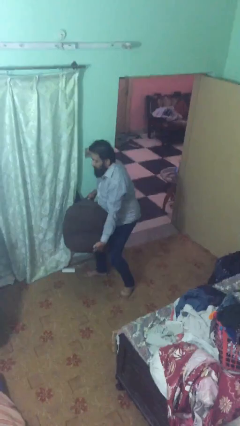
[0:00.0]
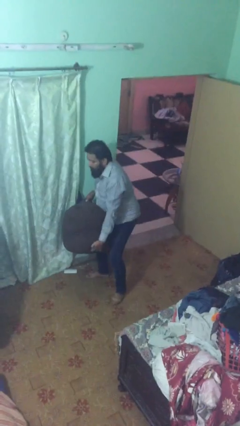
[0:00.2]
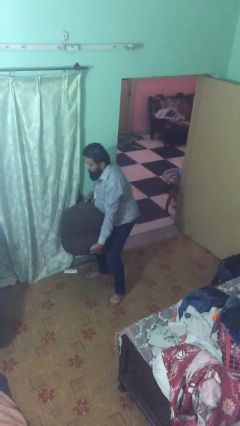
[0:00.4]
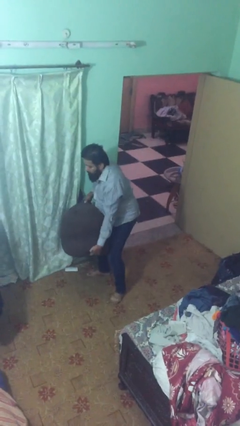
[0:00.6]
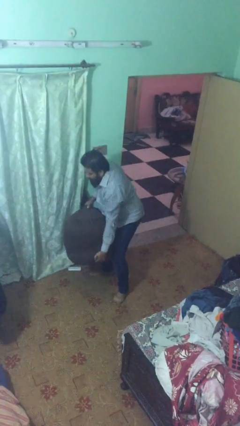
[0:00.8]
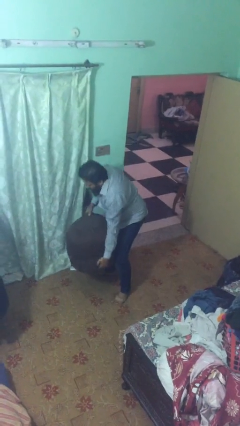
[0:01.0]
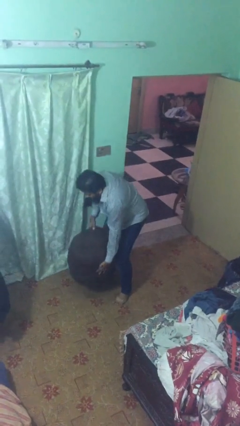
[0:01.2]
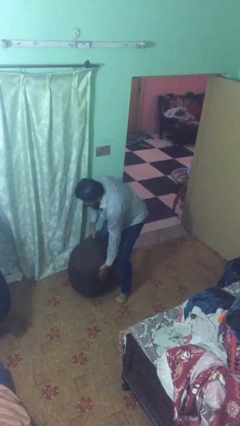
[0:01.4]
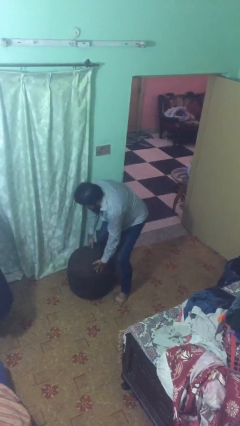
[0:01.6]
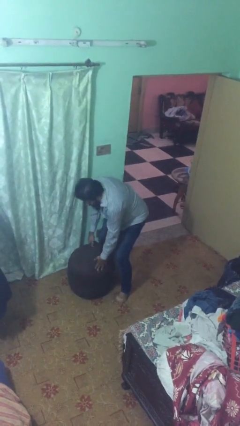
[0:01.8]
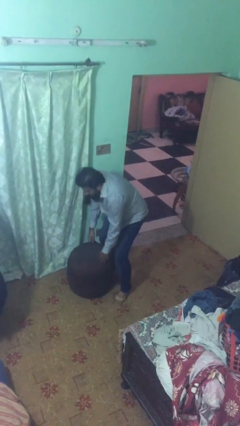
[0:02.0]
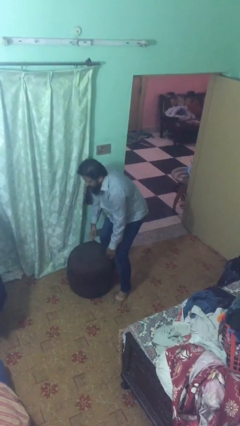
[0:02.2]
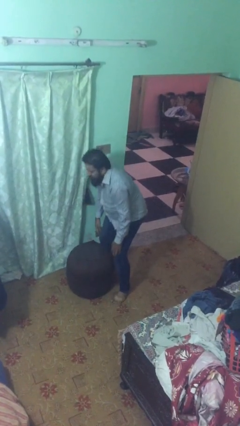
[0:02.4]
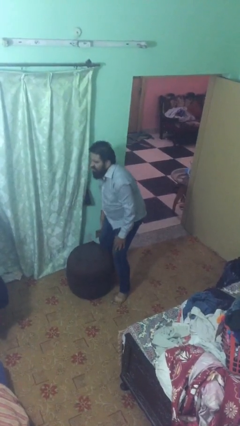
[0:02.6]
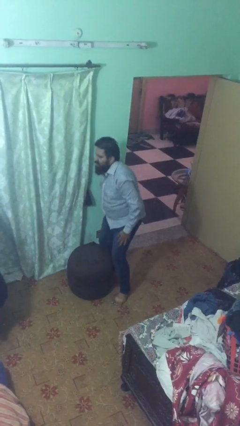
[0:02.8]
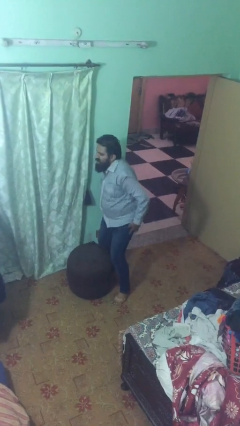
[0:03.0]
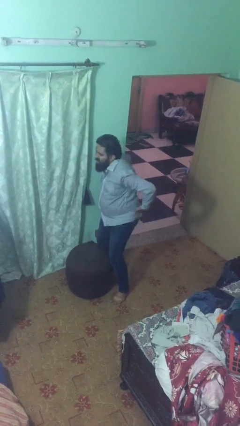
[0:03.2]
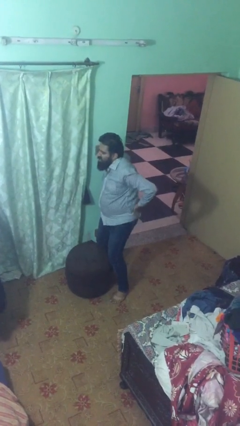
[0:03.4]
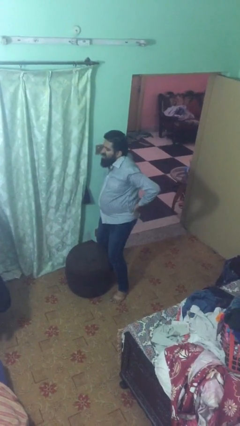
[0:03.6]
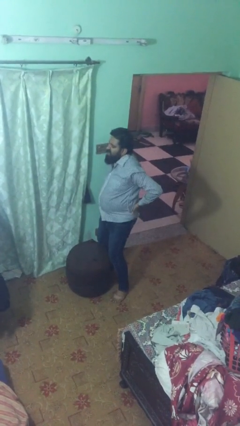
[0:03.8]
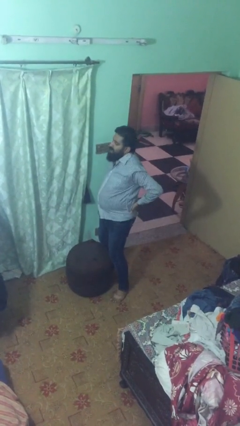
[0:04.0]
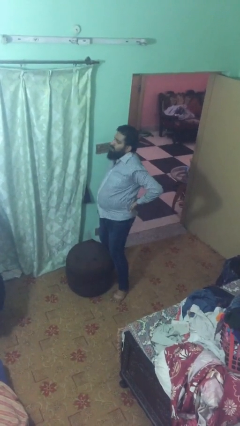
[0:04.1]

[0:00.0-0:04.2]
person puts down object on floor

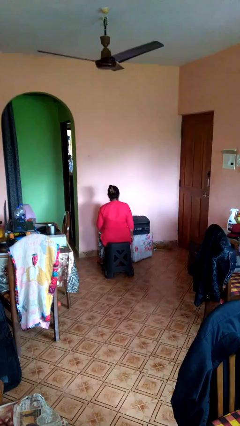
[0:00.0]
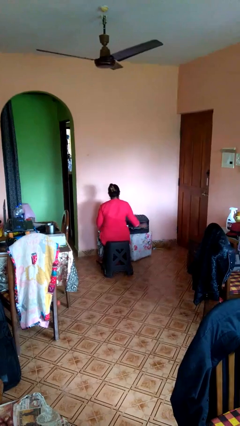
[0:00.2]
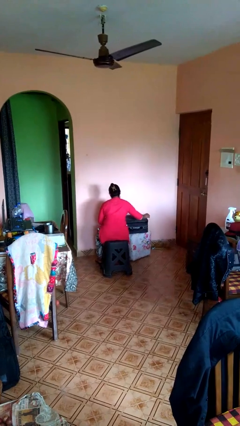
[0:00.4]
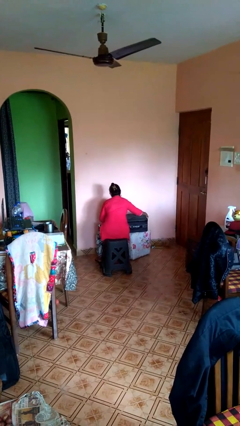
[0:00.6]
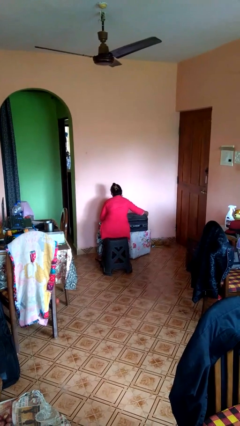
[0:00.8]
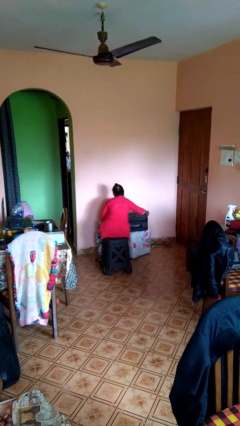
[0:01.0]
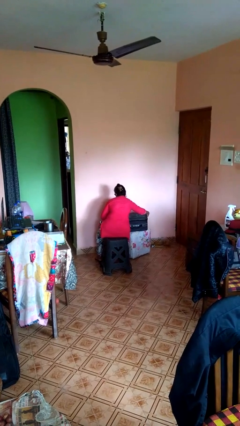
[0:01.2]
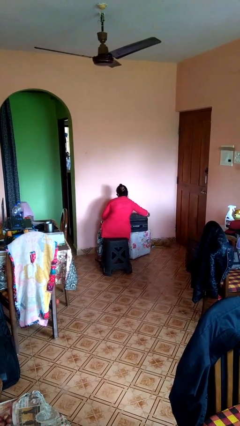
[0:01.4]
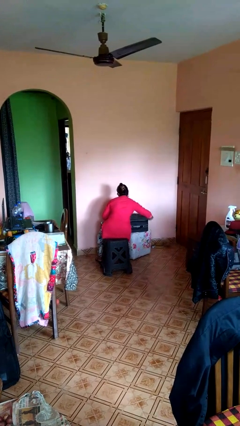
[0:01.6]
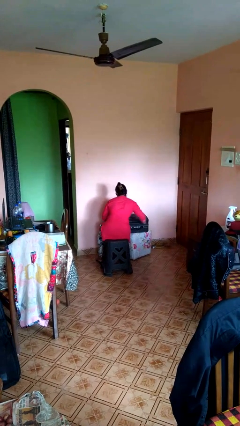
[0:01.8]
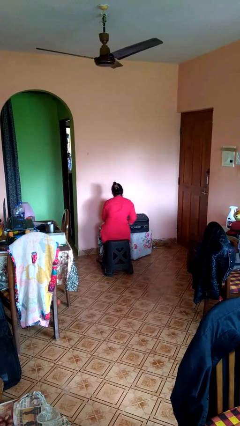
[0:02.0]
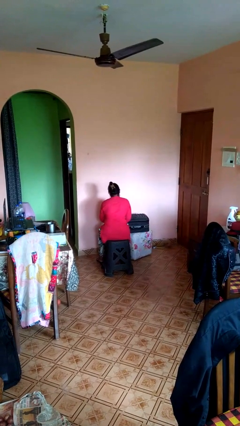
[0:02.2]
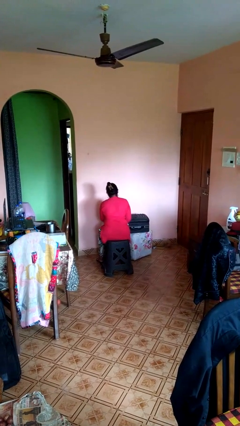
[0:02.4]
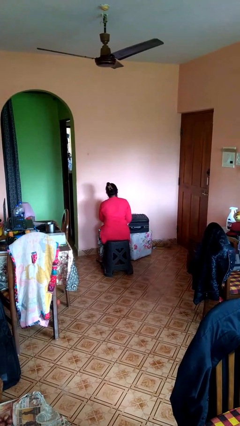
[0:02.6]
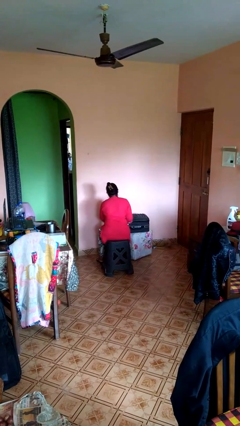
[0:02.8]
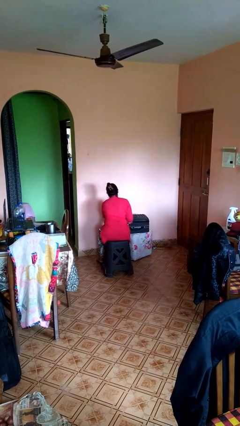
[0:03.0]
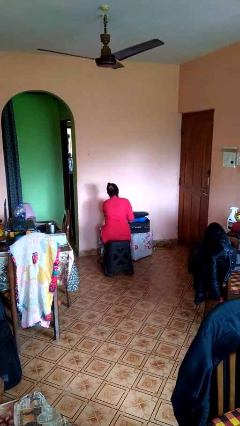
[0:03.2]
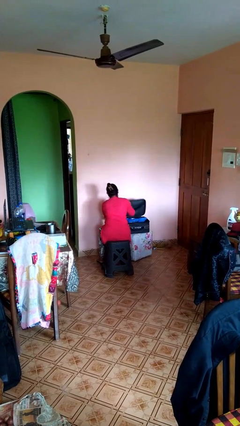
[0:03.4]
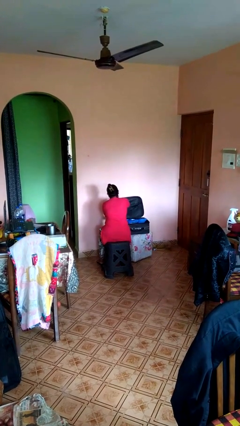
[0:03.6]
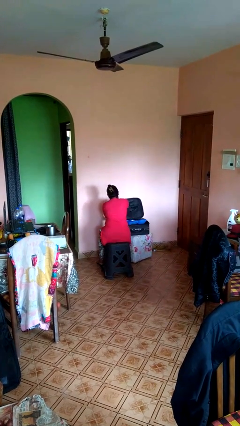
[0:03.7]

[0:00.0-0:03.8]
person opens suitcase

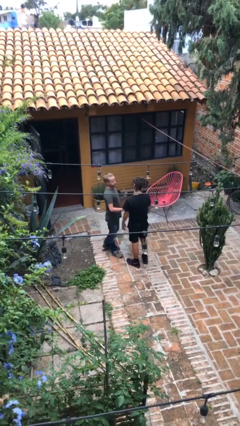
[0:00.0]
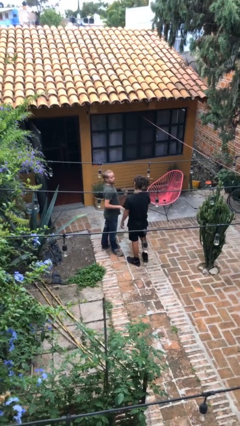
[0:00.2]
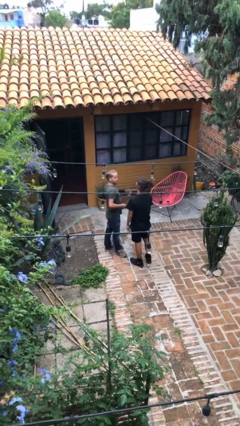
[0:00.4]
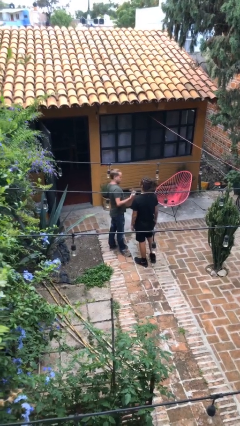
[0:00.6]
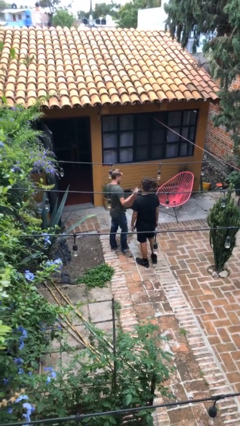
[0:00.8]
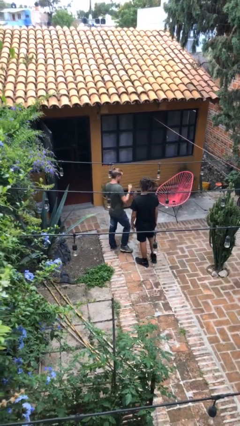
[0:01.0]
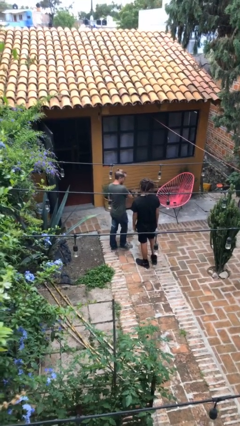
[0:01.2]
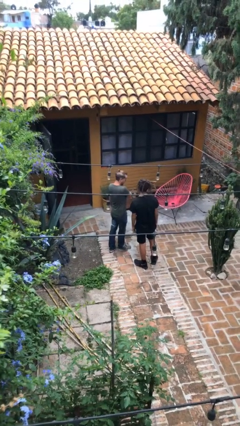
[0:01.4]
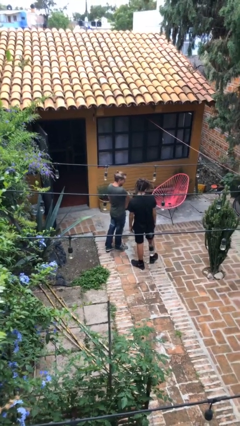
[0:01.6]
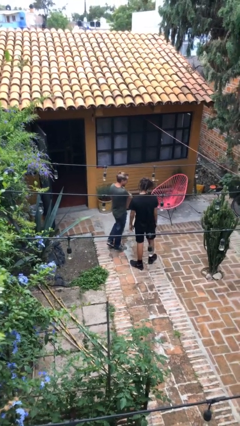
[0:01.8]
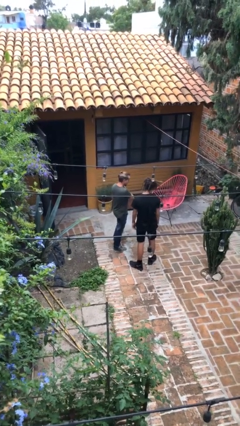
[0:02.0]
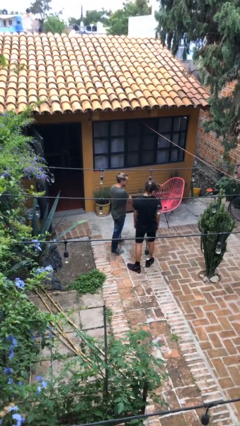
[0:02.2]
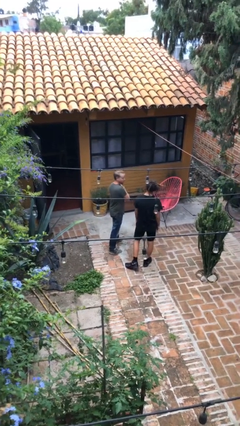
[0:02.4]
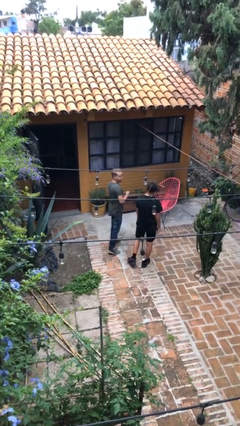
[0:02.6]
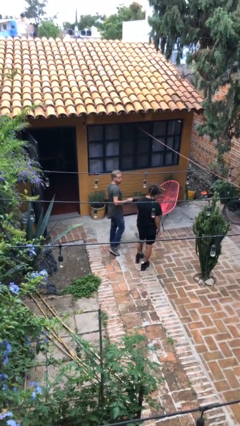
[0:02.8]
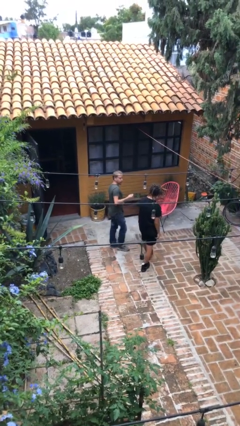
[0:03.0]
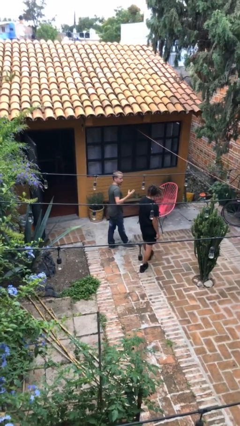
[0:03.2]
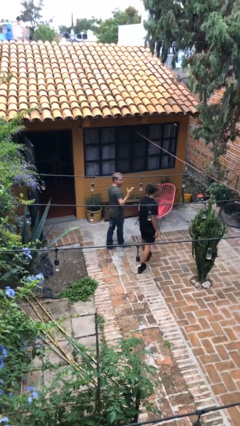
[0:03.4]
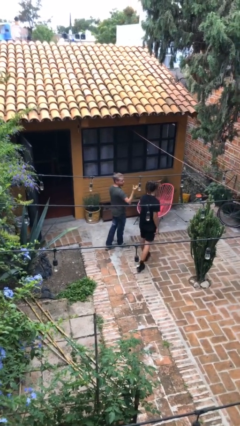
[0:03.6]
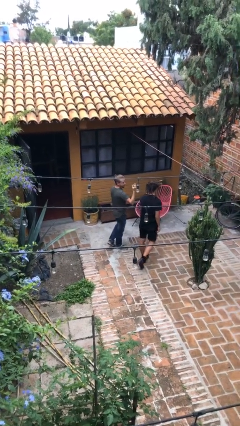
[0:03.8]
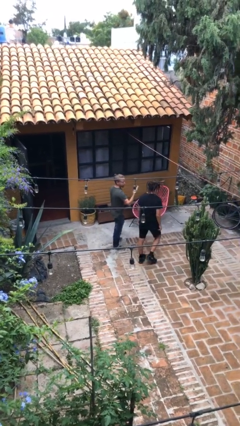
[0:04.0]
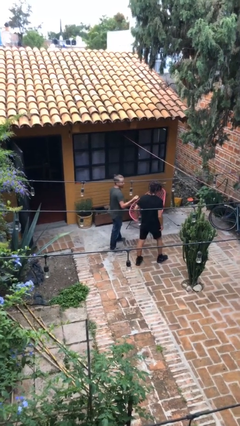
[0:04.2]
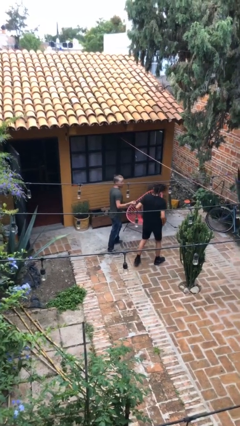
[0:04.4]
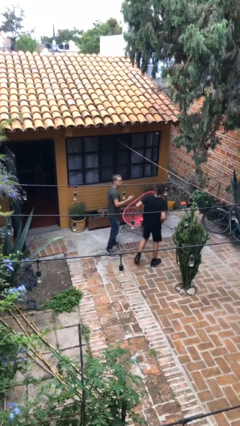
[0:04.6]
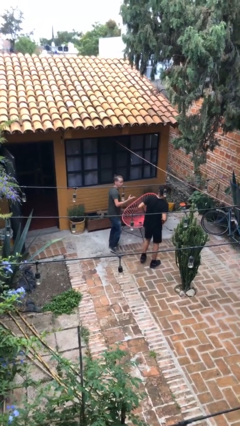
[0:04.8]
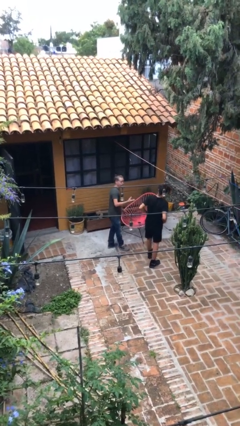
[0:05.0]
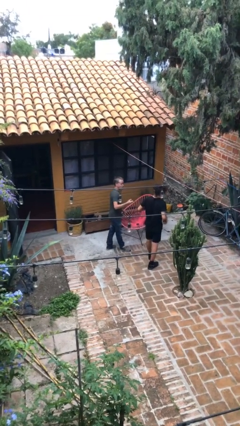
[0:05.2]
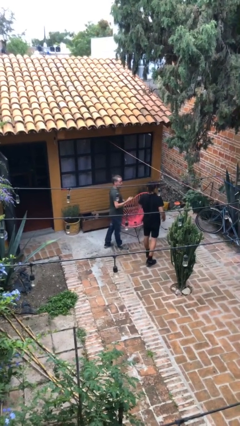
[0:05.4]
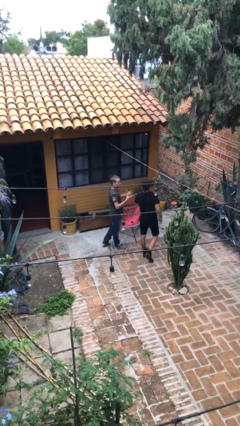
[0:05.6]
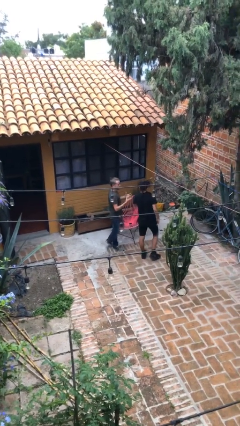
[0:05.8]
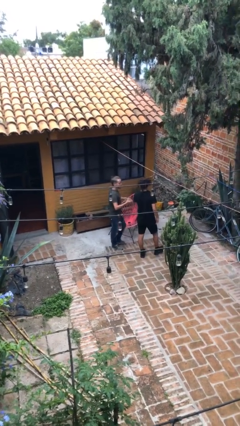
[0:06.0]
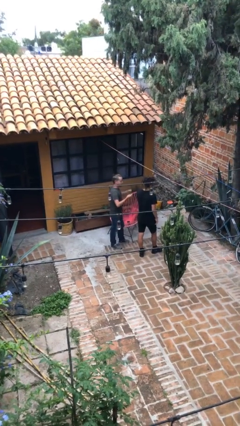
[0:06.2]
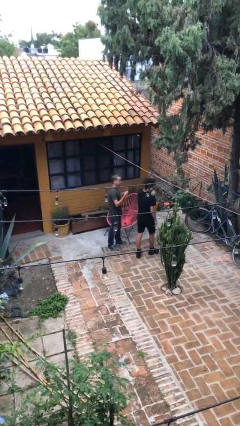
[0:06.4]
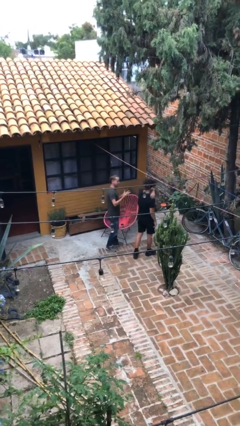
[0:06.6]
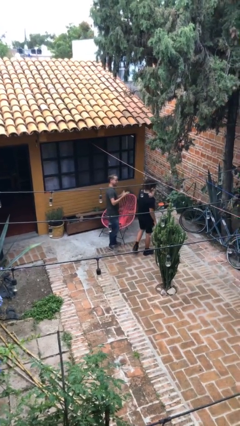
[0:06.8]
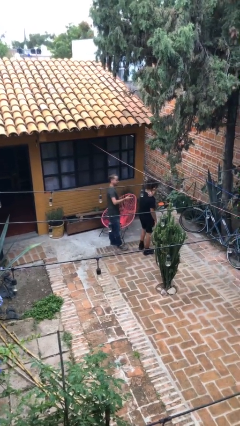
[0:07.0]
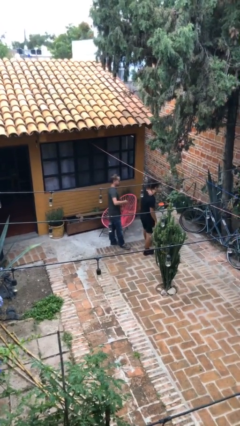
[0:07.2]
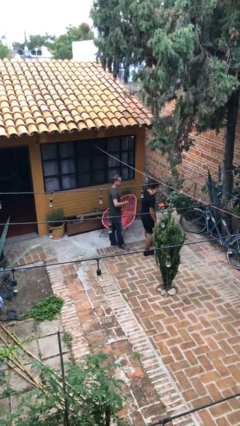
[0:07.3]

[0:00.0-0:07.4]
person talks to person

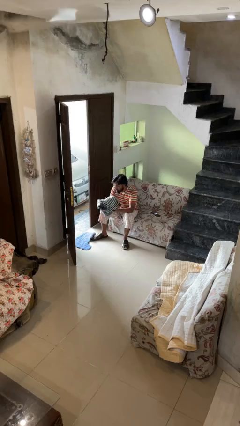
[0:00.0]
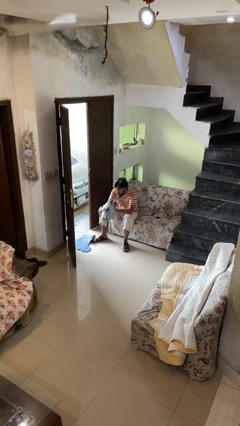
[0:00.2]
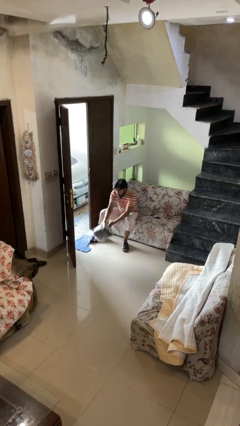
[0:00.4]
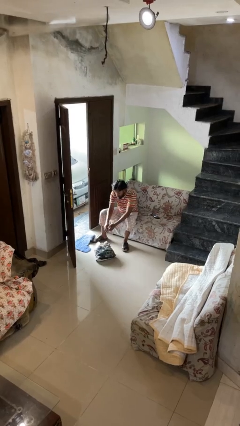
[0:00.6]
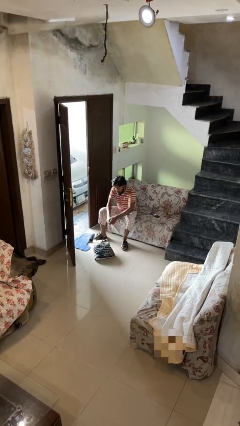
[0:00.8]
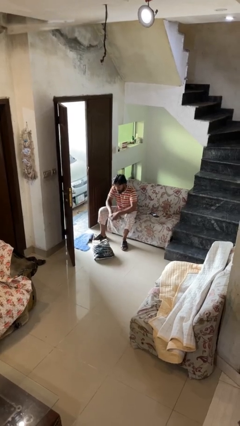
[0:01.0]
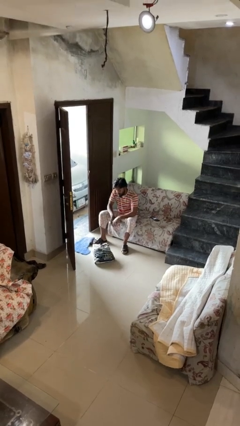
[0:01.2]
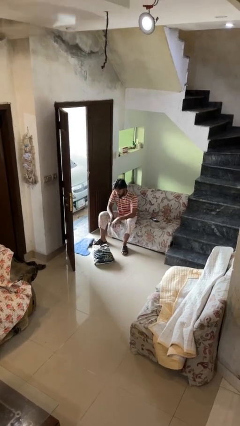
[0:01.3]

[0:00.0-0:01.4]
person drops object

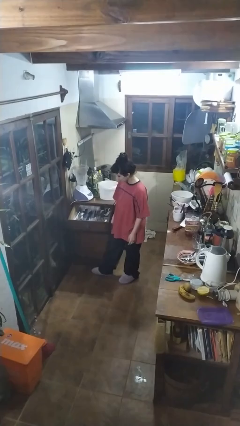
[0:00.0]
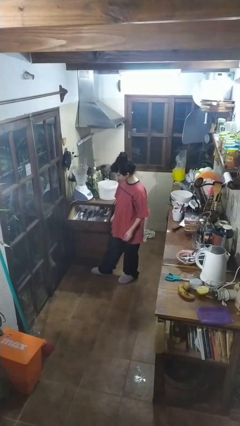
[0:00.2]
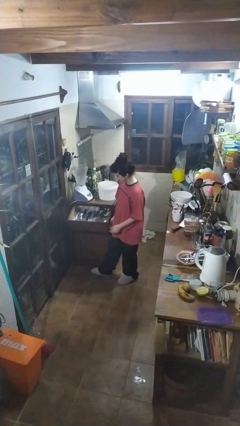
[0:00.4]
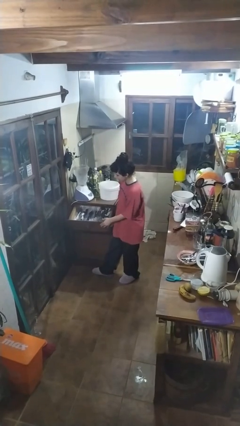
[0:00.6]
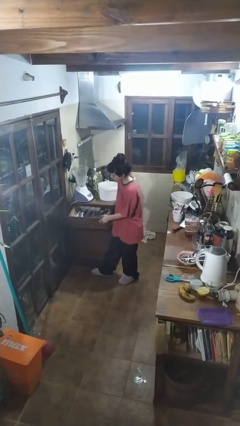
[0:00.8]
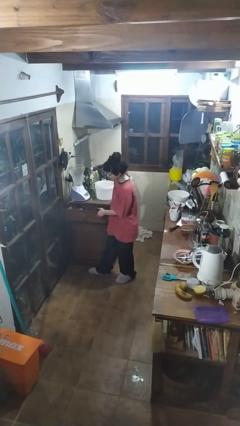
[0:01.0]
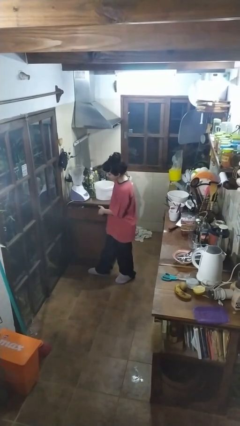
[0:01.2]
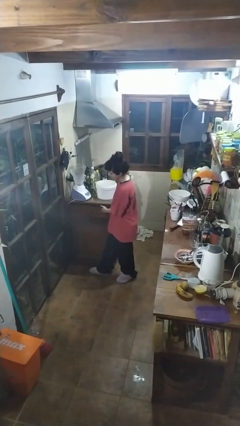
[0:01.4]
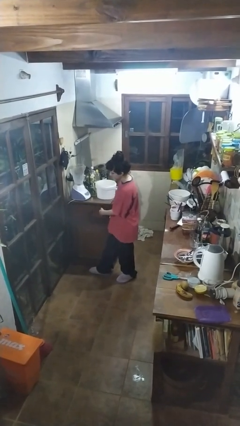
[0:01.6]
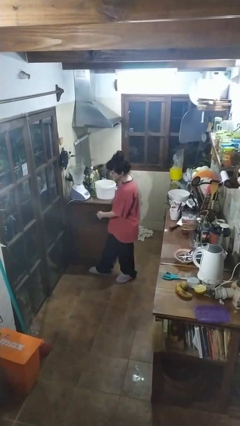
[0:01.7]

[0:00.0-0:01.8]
person closes kitchen drawer
